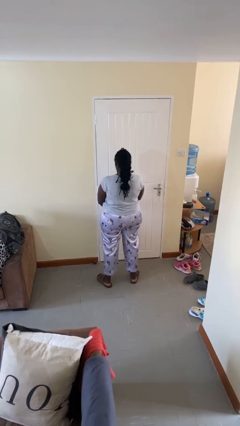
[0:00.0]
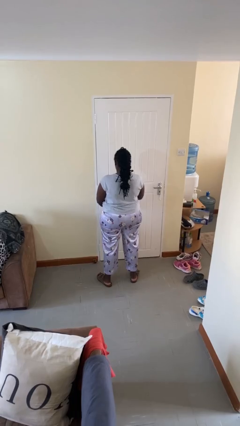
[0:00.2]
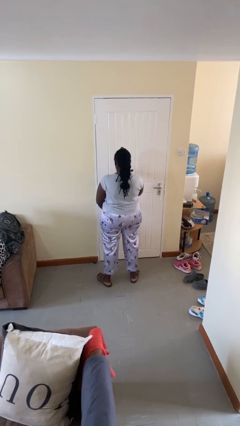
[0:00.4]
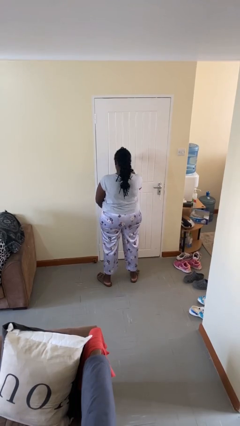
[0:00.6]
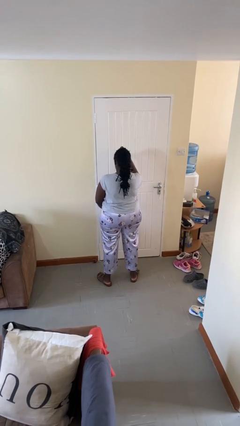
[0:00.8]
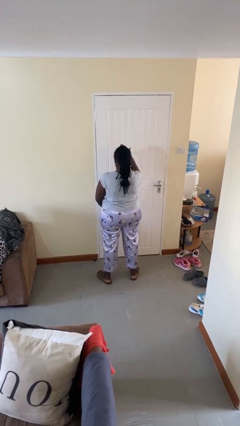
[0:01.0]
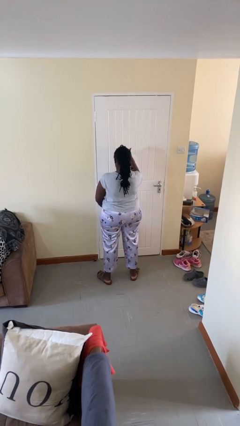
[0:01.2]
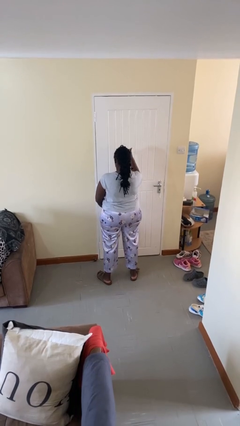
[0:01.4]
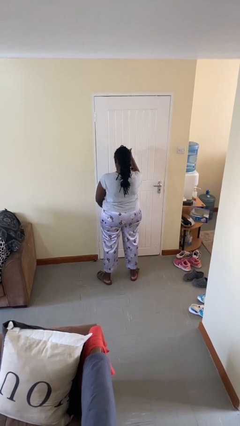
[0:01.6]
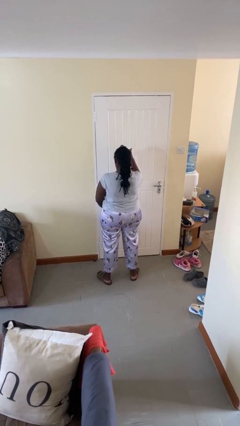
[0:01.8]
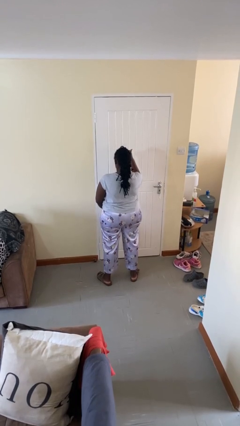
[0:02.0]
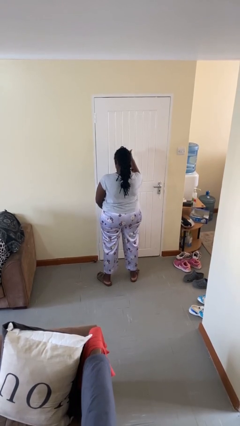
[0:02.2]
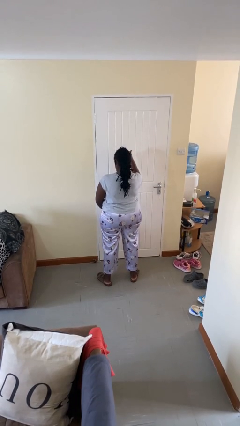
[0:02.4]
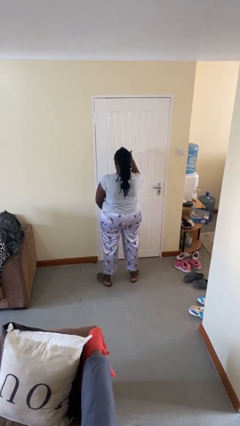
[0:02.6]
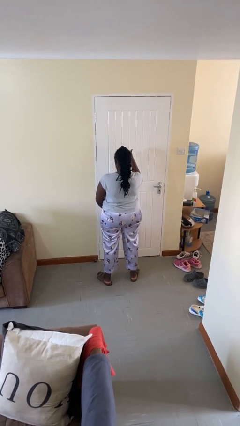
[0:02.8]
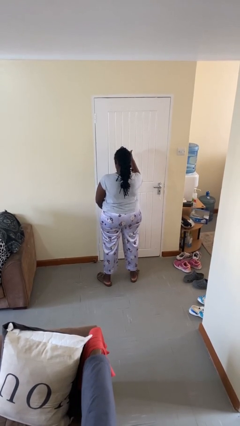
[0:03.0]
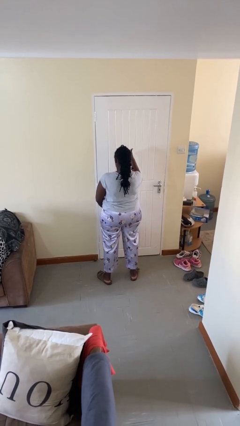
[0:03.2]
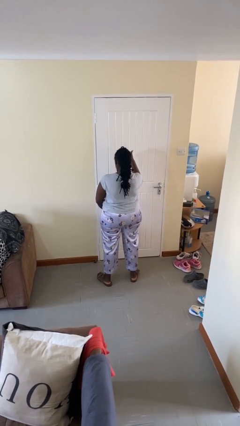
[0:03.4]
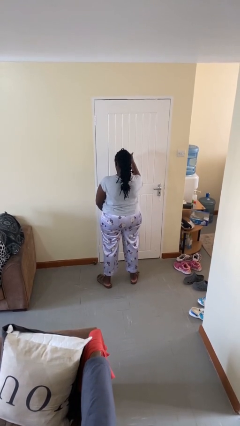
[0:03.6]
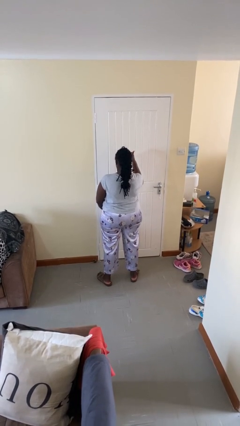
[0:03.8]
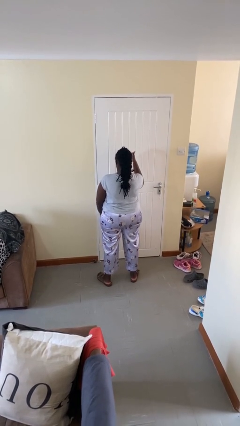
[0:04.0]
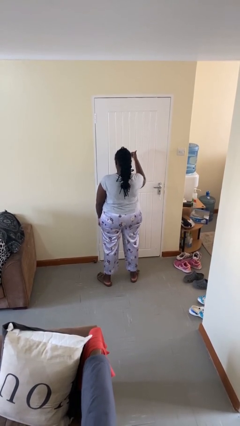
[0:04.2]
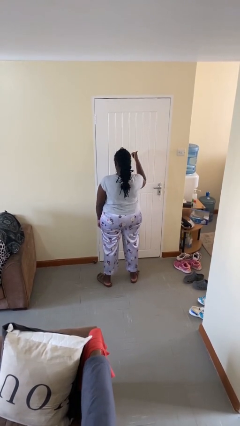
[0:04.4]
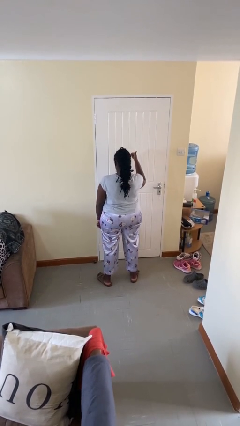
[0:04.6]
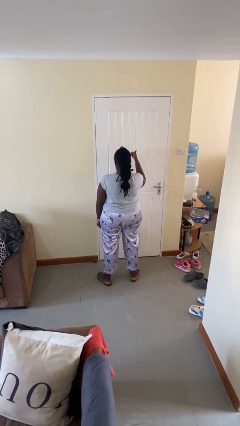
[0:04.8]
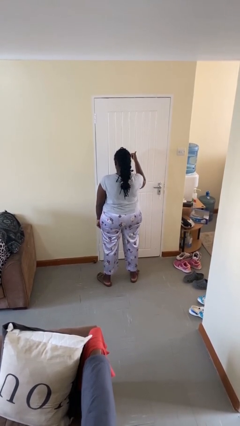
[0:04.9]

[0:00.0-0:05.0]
person gestures thumbs up

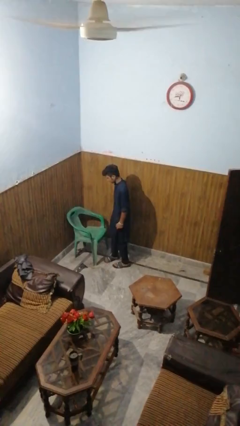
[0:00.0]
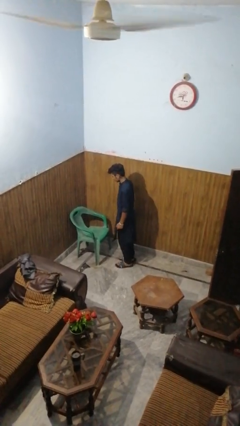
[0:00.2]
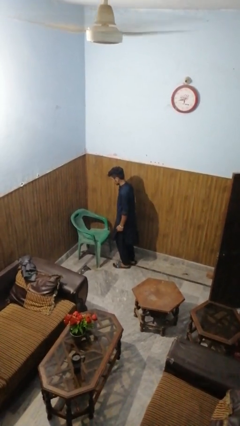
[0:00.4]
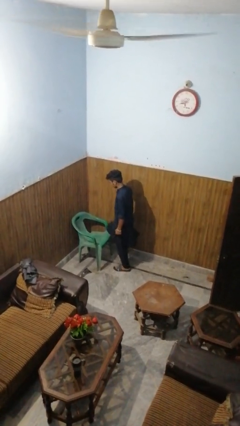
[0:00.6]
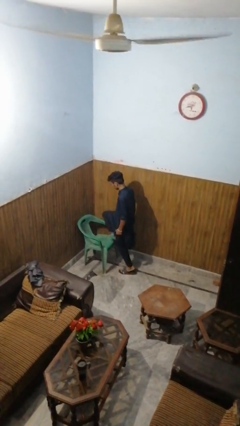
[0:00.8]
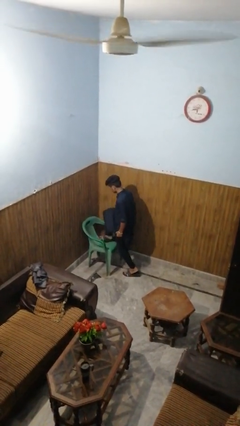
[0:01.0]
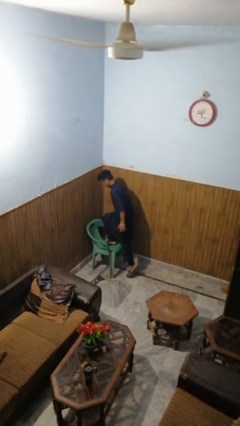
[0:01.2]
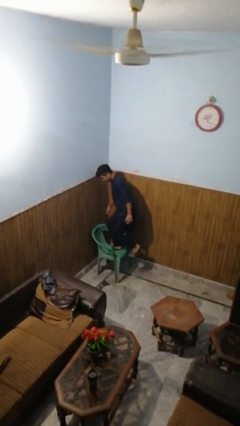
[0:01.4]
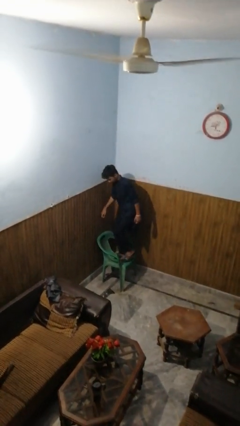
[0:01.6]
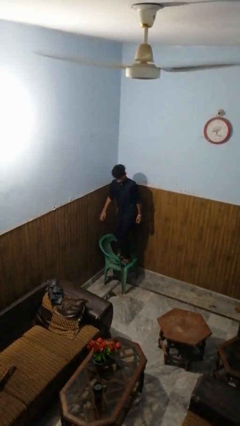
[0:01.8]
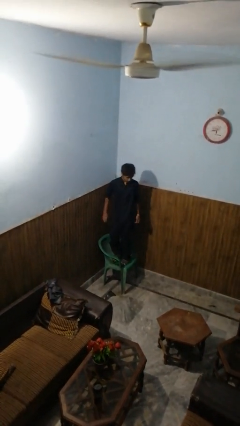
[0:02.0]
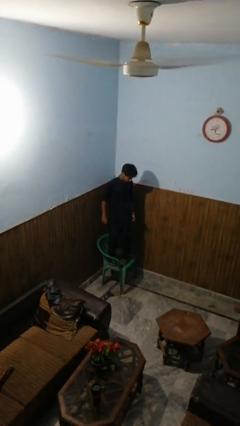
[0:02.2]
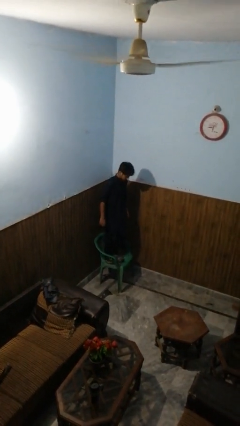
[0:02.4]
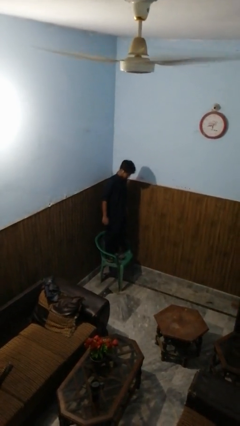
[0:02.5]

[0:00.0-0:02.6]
person climbs on chair

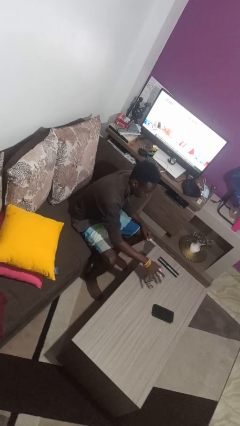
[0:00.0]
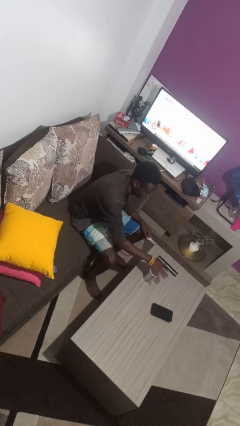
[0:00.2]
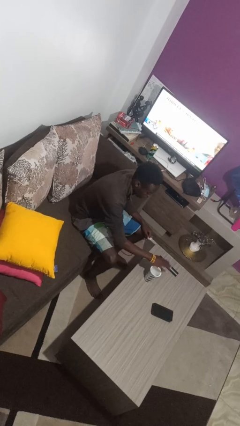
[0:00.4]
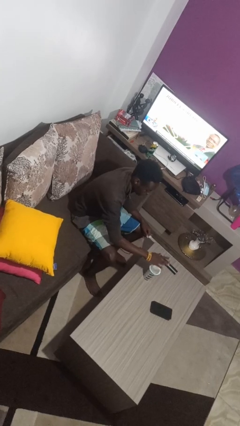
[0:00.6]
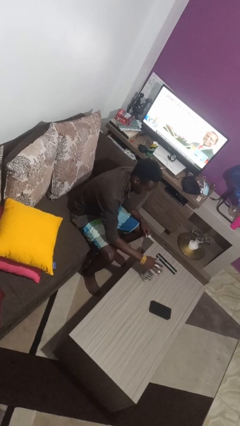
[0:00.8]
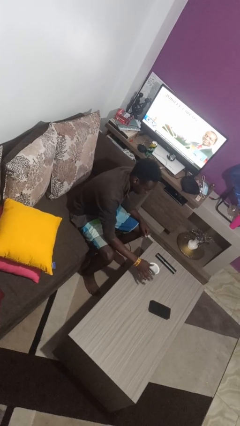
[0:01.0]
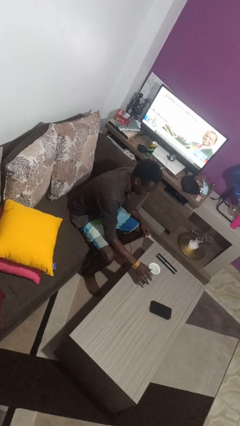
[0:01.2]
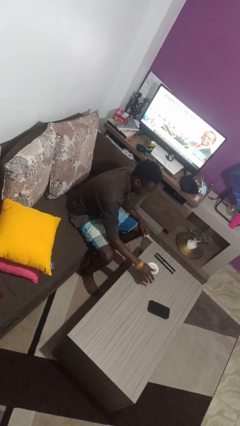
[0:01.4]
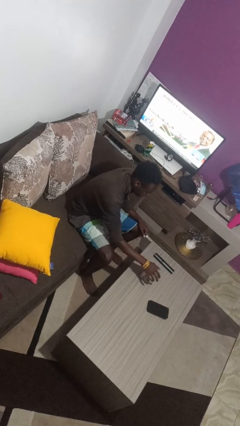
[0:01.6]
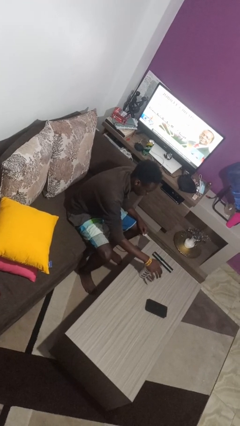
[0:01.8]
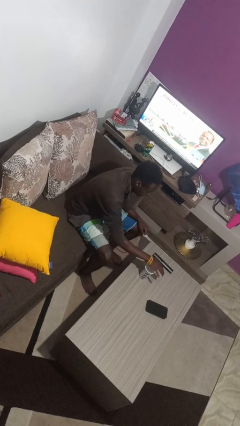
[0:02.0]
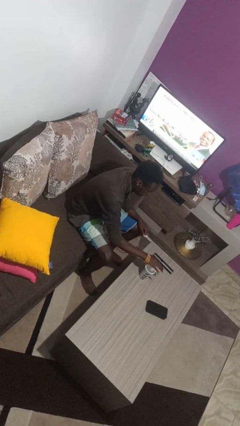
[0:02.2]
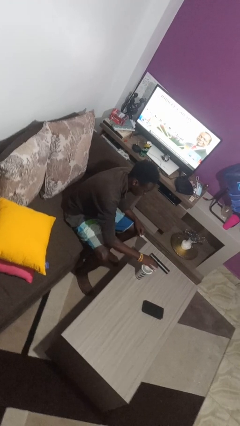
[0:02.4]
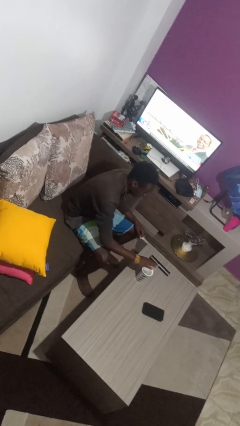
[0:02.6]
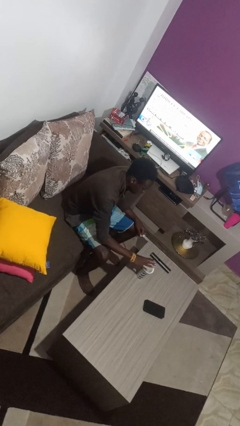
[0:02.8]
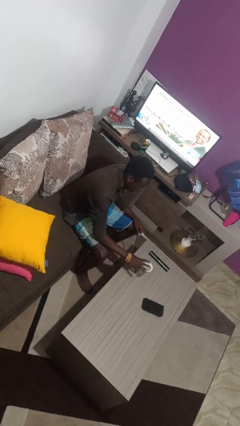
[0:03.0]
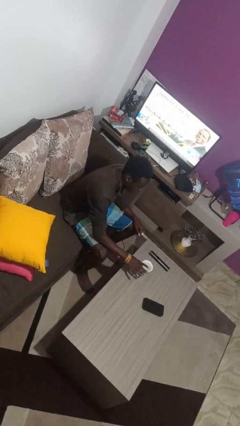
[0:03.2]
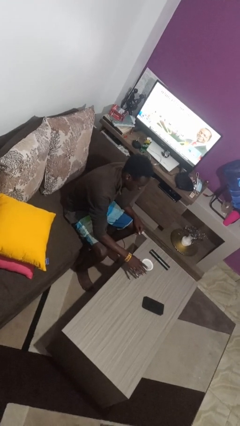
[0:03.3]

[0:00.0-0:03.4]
person waves hand over object

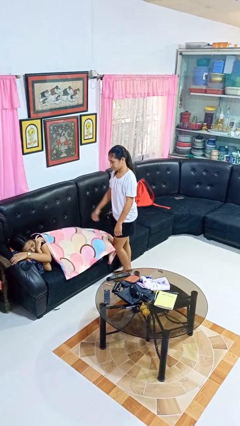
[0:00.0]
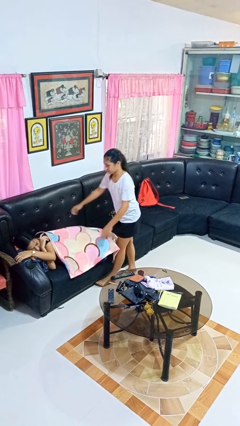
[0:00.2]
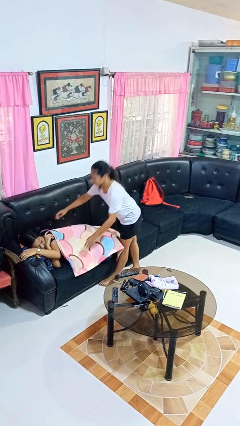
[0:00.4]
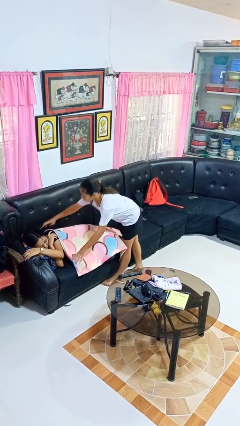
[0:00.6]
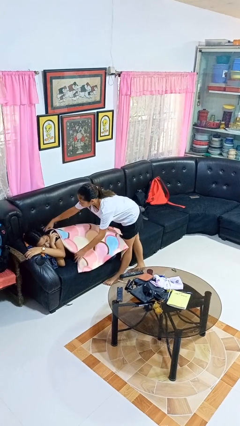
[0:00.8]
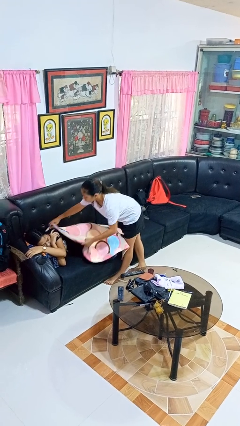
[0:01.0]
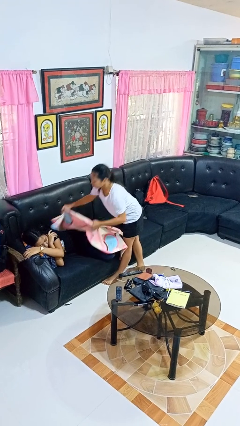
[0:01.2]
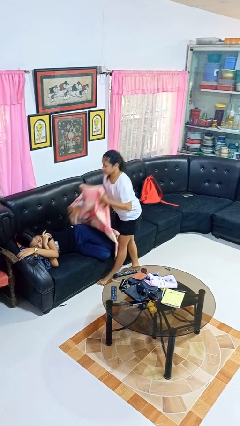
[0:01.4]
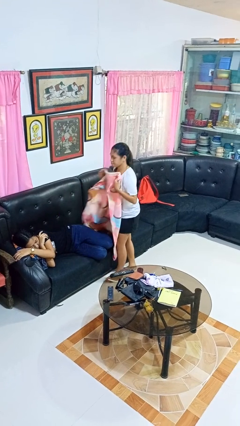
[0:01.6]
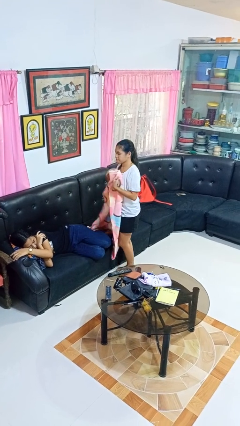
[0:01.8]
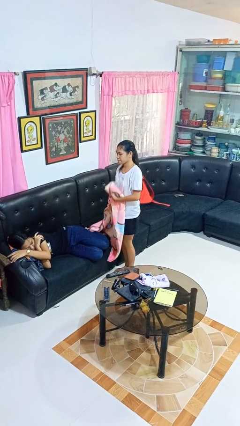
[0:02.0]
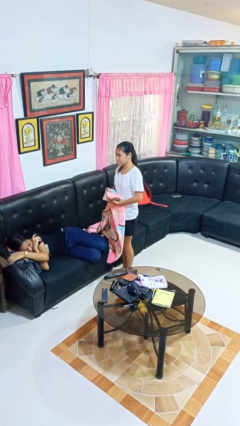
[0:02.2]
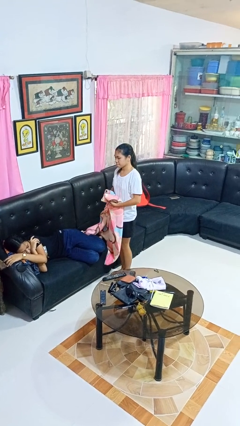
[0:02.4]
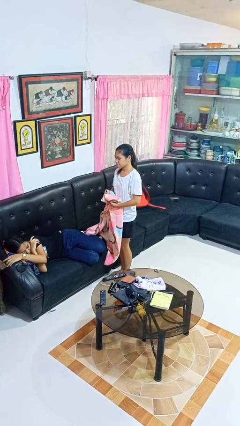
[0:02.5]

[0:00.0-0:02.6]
person uncovers friend with blanket

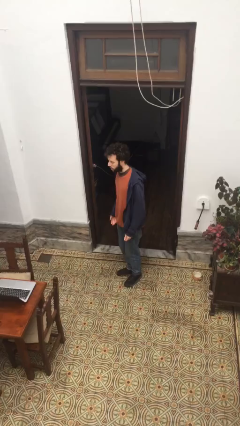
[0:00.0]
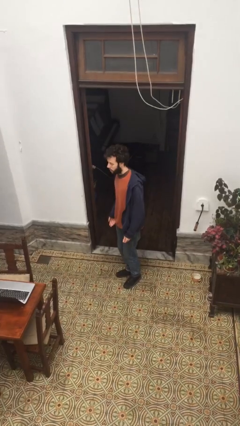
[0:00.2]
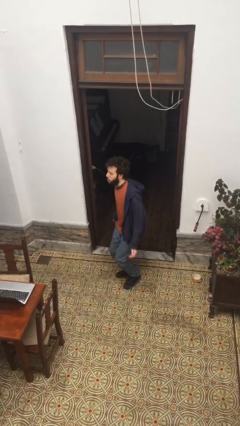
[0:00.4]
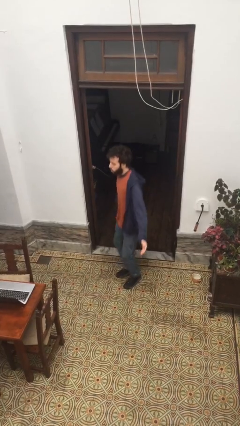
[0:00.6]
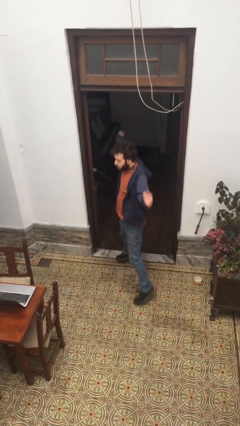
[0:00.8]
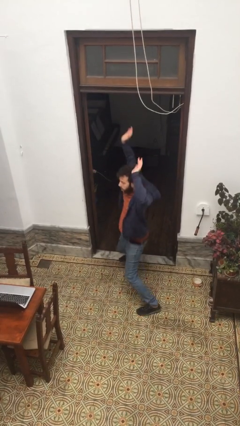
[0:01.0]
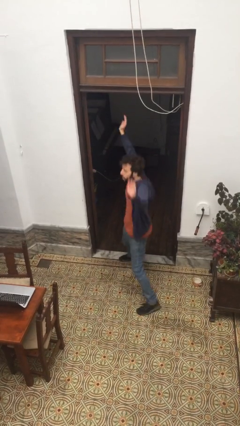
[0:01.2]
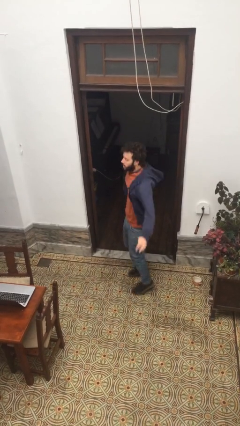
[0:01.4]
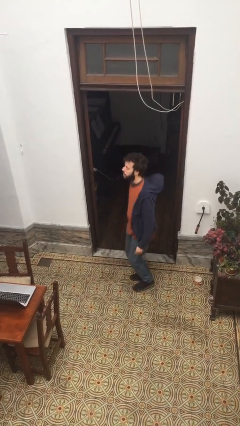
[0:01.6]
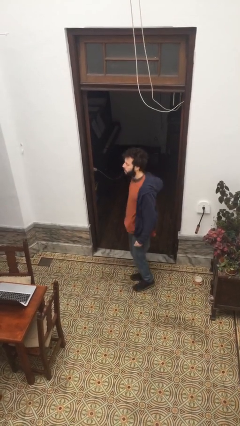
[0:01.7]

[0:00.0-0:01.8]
person exercises with jumping jacks

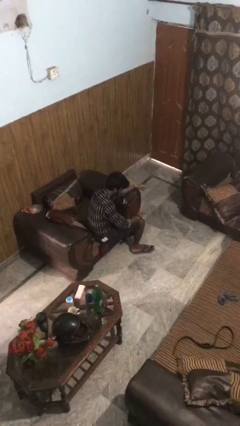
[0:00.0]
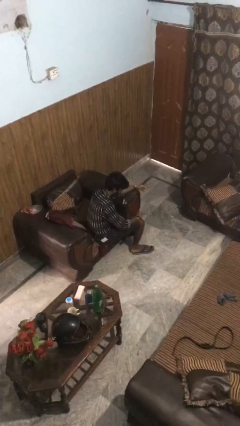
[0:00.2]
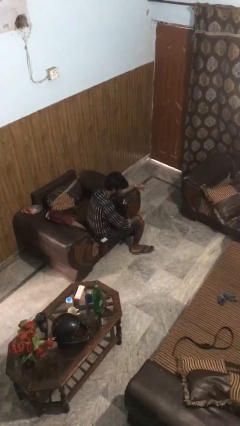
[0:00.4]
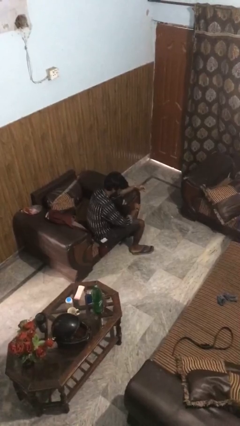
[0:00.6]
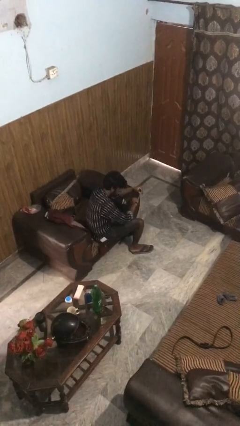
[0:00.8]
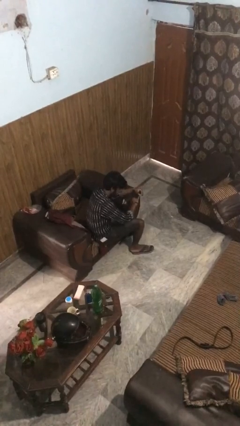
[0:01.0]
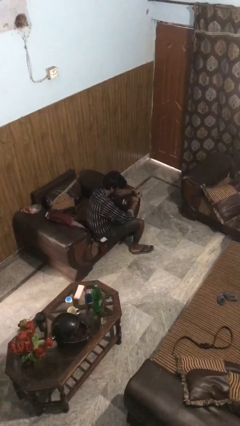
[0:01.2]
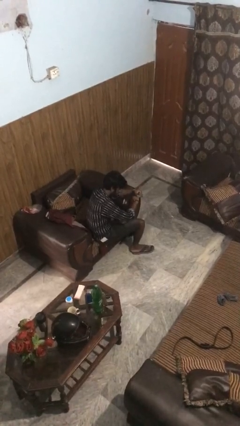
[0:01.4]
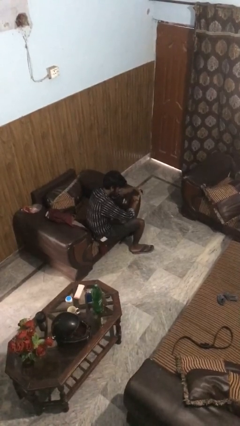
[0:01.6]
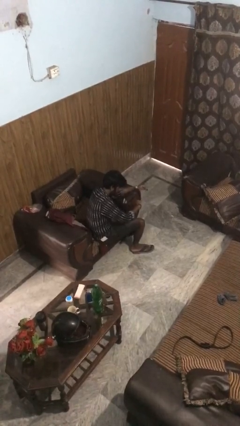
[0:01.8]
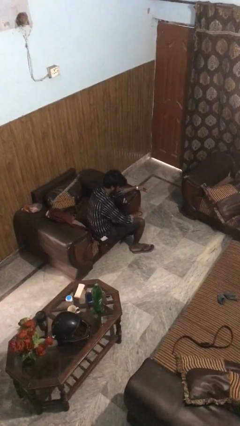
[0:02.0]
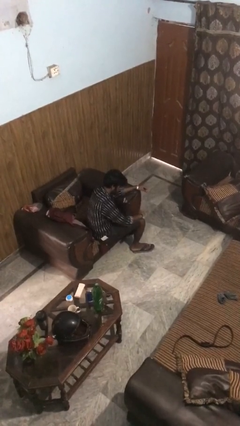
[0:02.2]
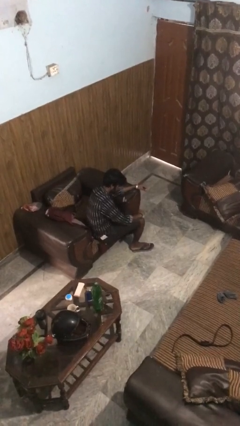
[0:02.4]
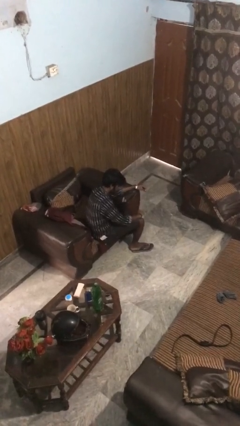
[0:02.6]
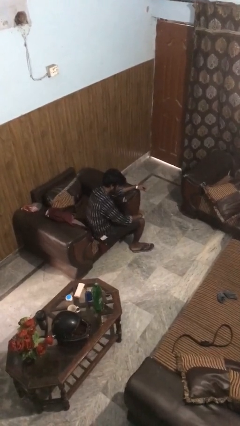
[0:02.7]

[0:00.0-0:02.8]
person puts on ring
